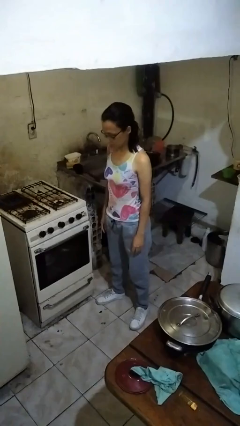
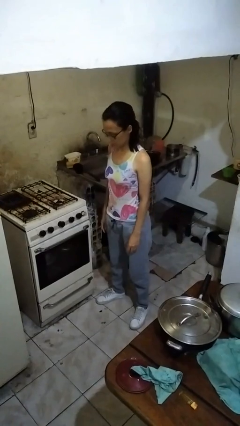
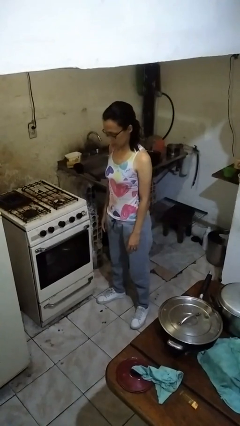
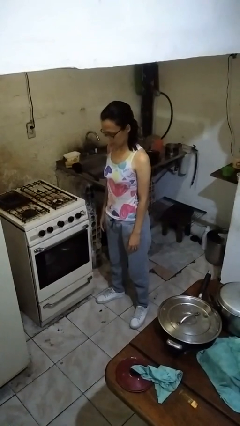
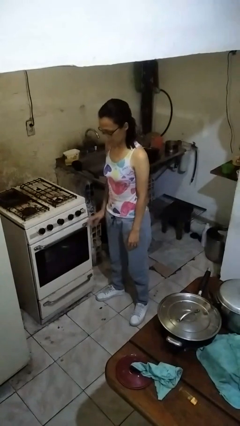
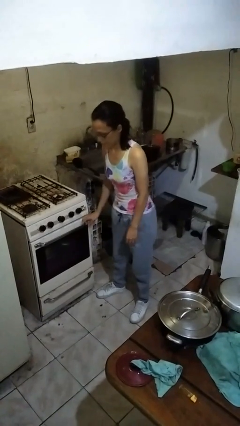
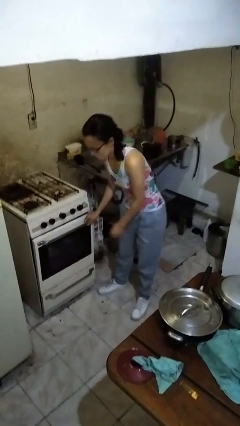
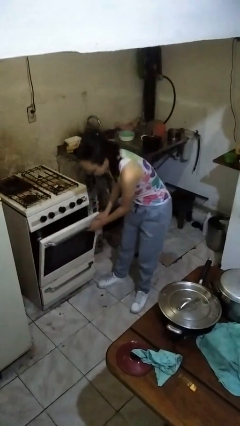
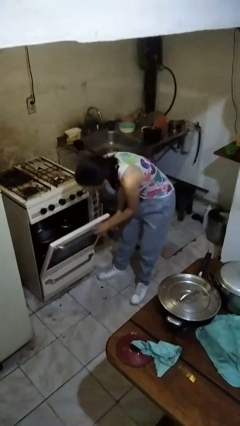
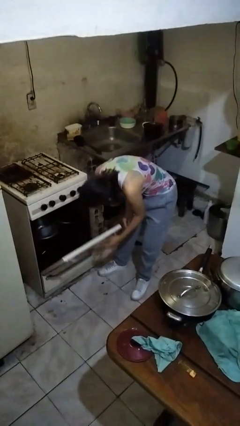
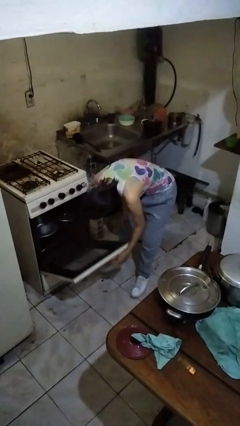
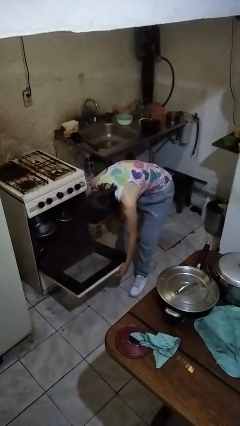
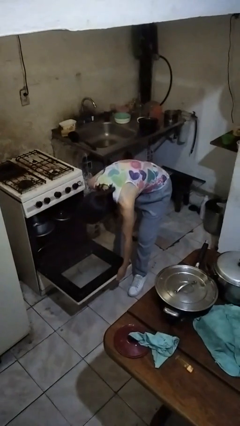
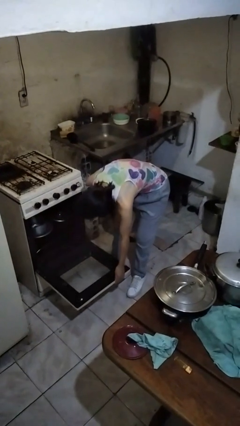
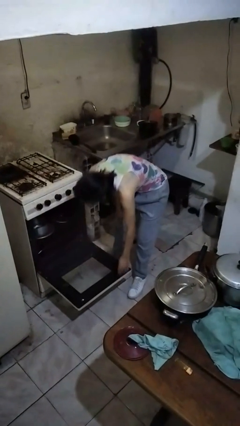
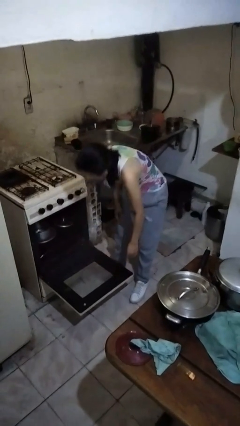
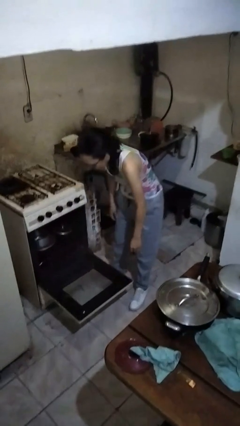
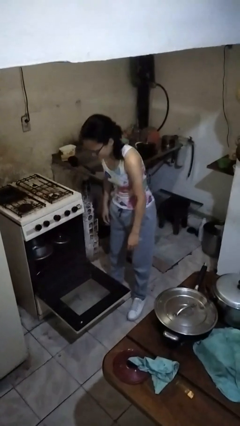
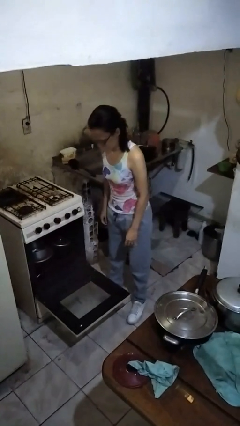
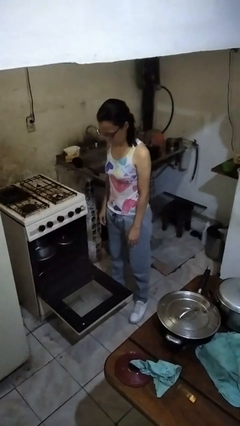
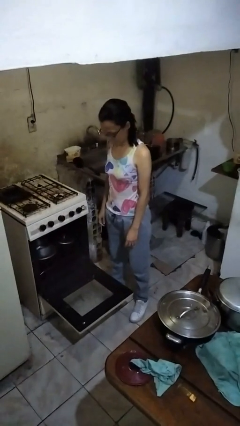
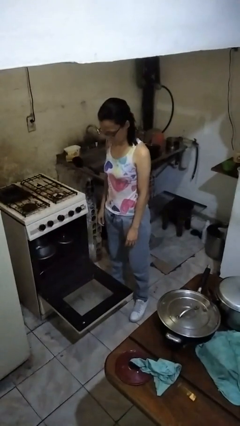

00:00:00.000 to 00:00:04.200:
person opens oven door

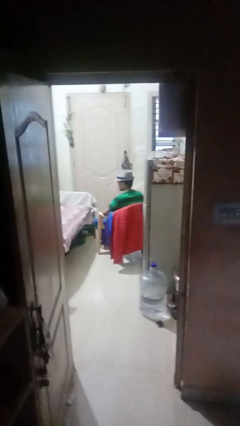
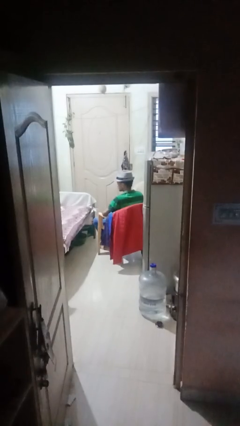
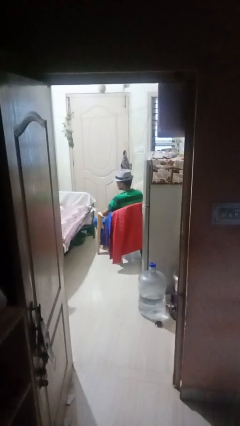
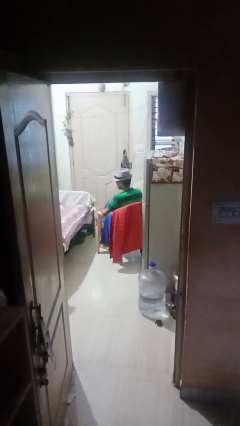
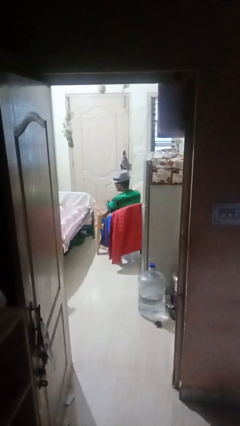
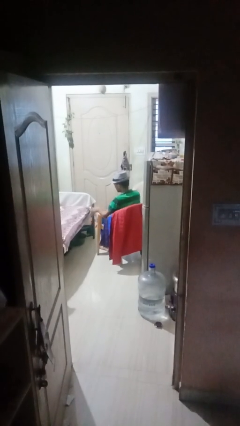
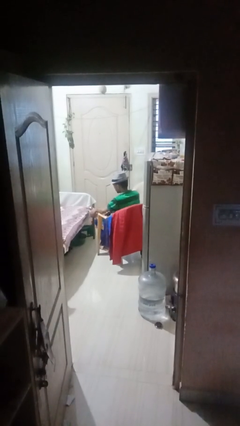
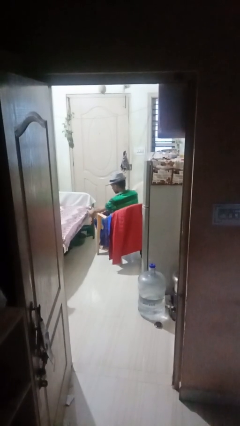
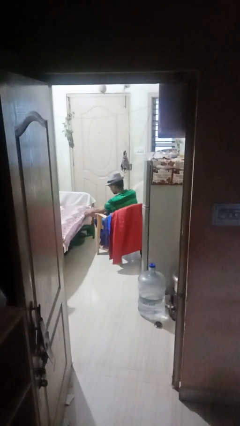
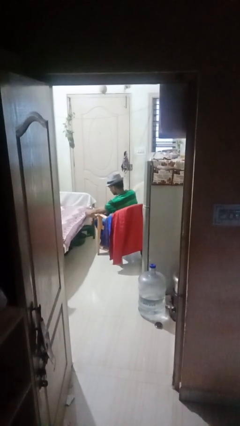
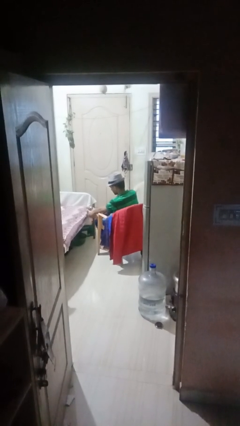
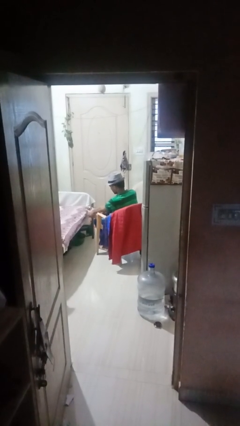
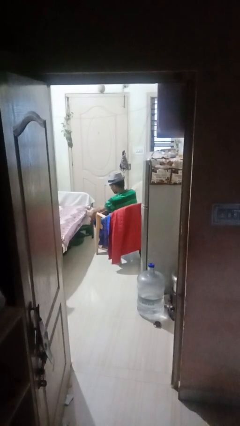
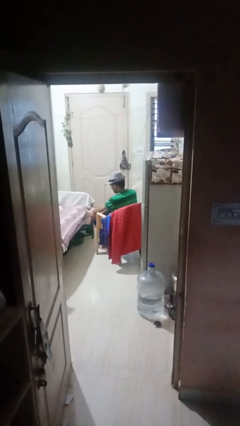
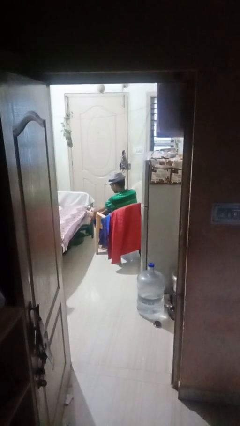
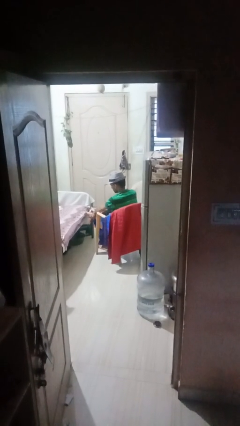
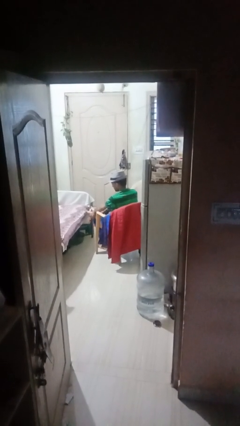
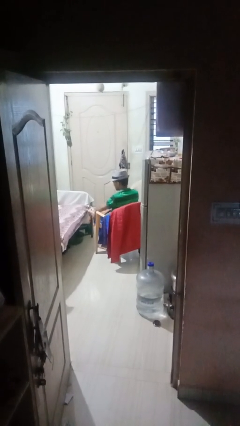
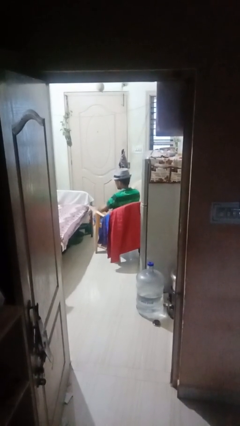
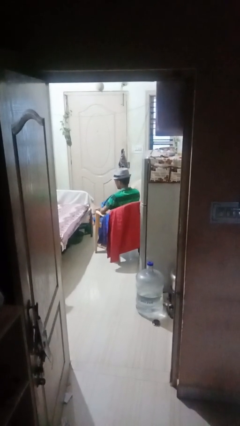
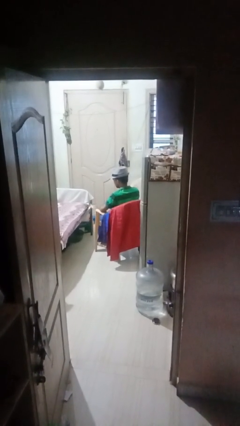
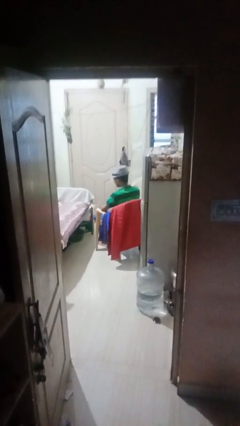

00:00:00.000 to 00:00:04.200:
person rubs foot

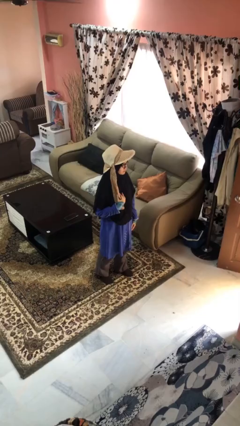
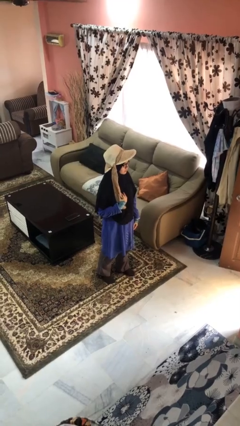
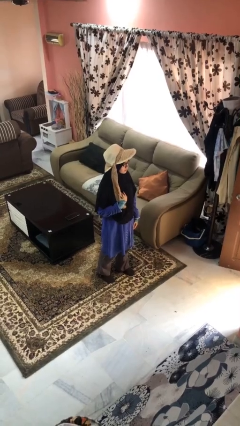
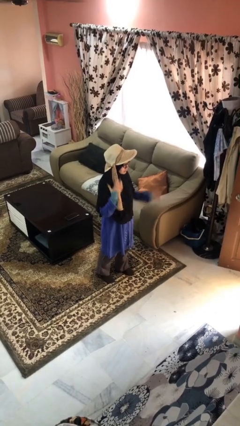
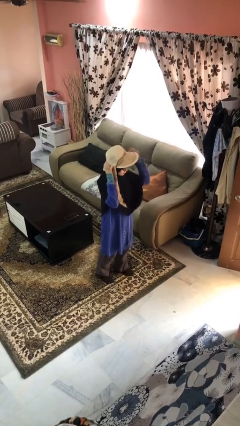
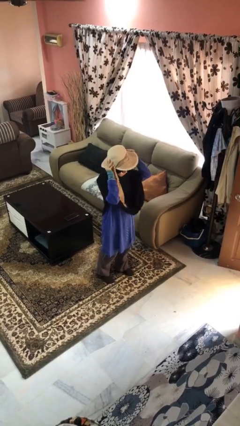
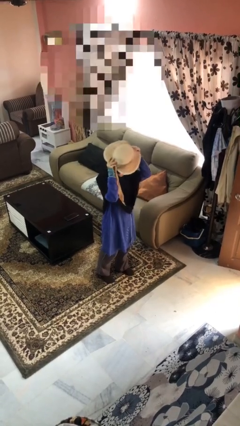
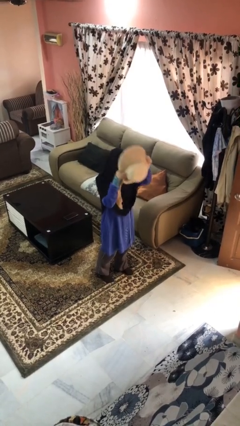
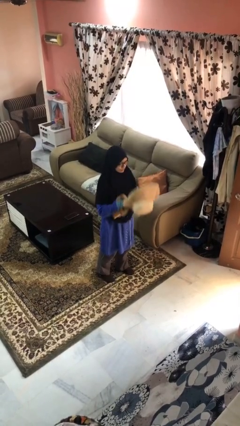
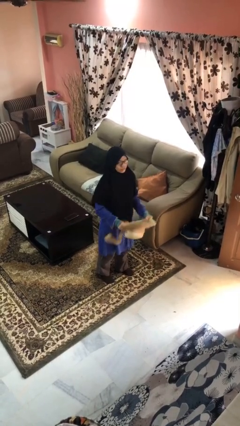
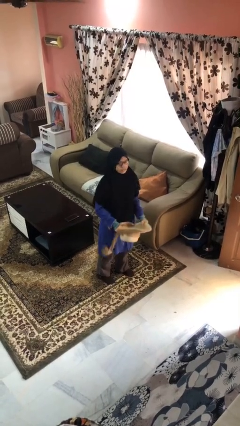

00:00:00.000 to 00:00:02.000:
person takes off hat

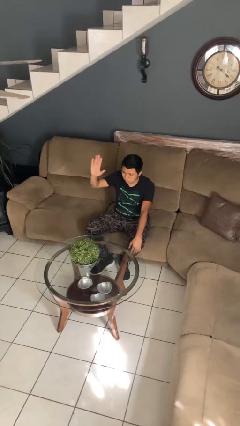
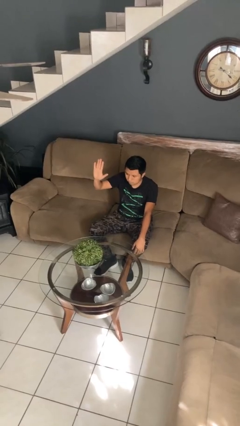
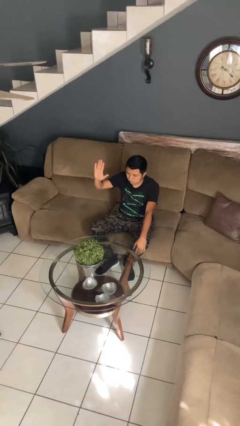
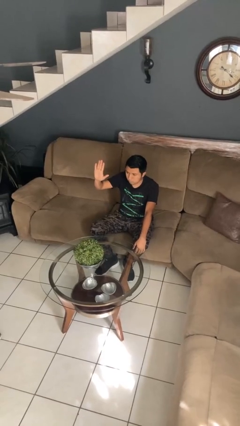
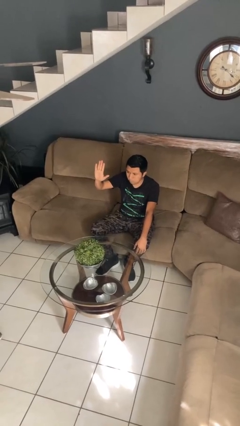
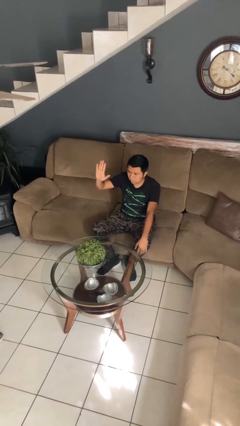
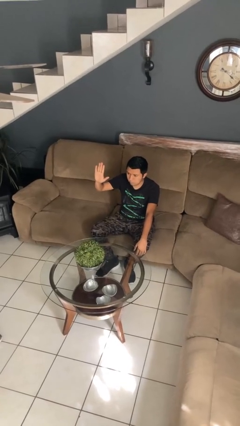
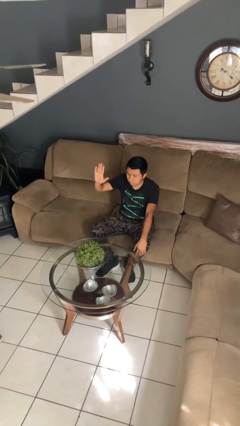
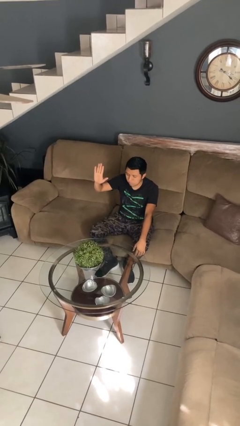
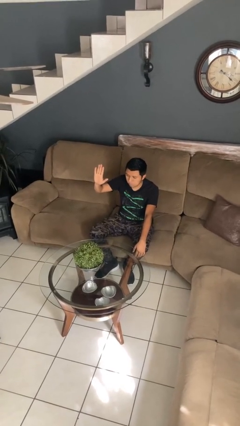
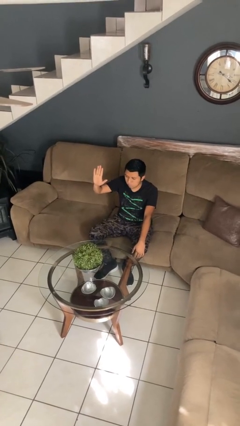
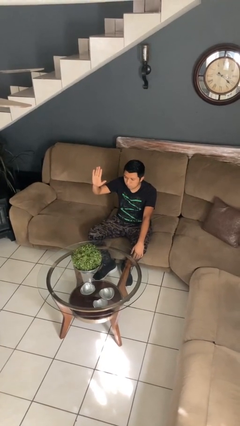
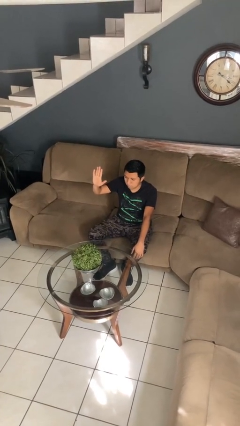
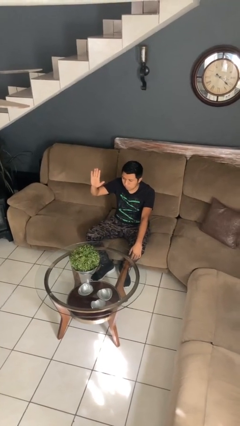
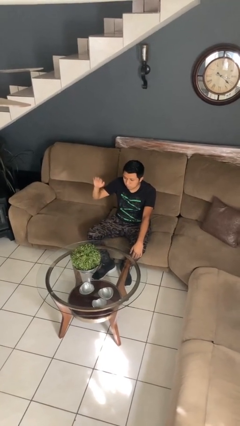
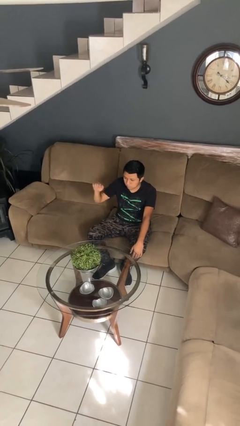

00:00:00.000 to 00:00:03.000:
person gestures stop

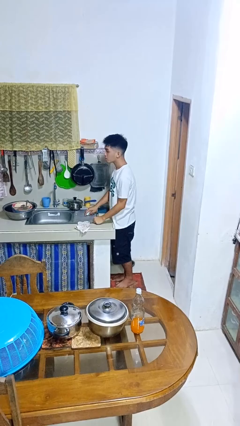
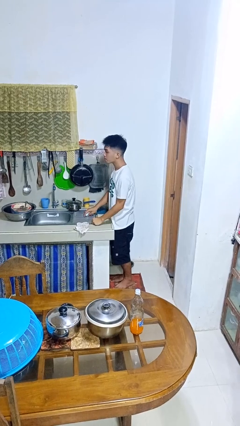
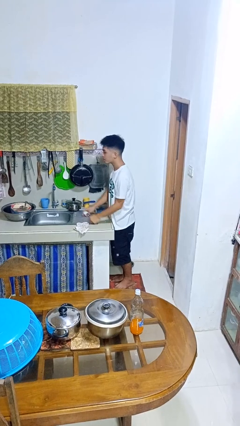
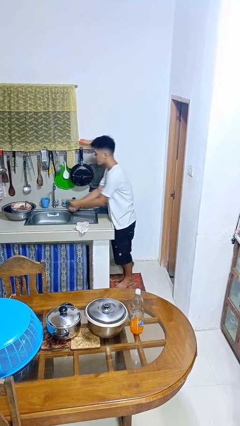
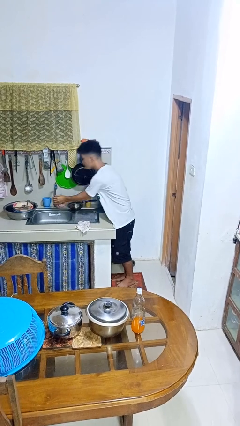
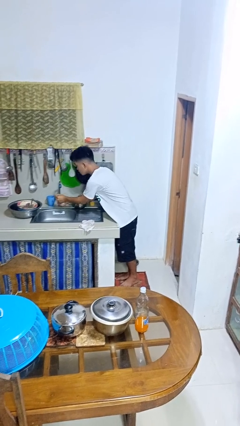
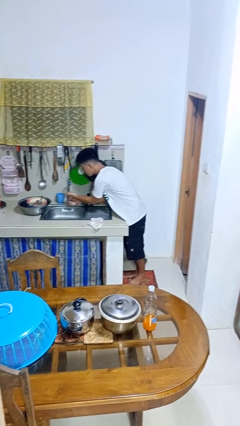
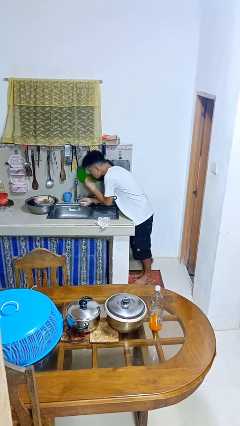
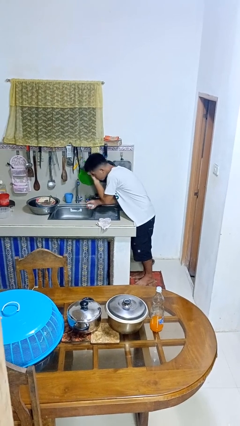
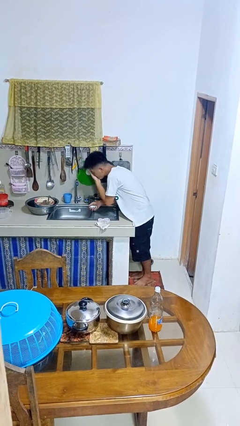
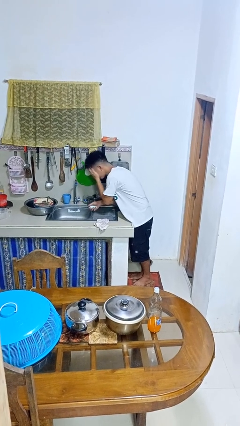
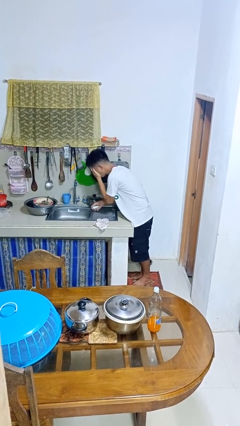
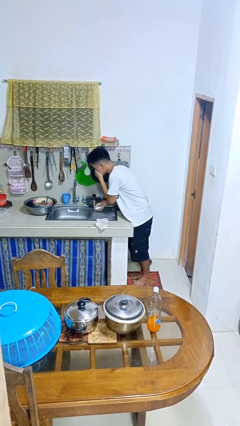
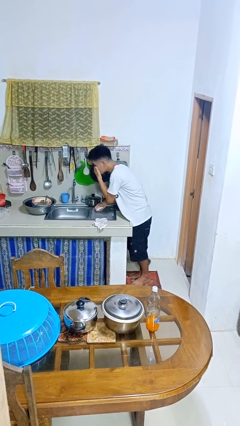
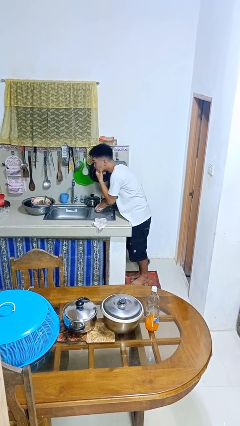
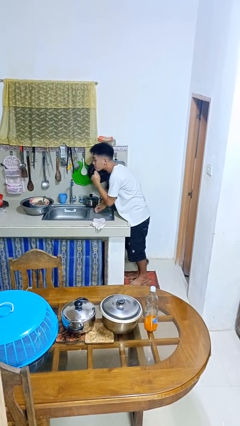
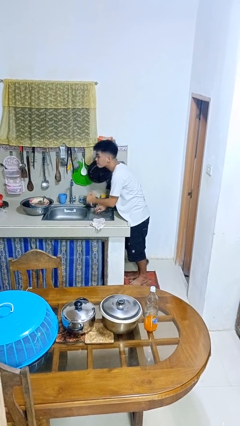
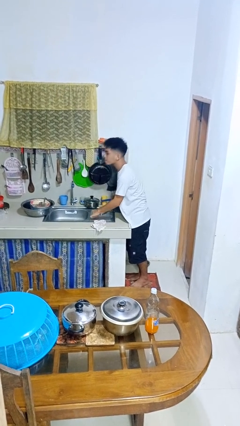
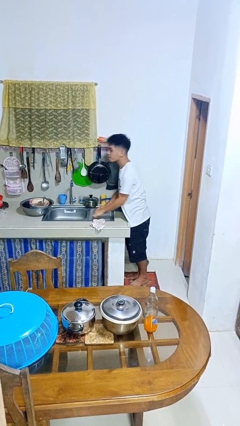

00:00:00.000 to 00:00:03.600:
person washes face

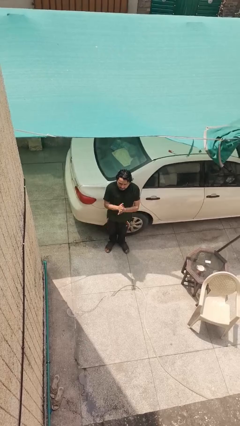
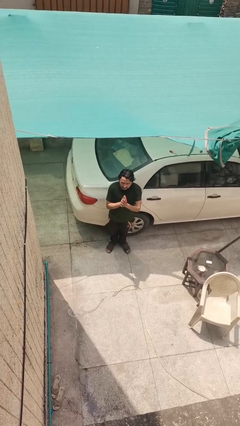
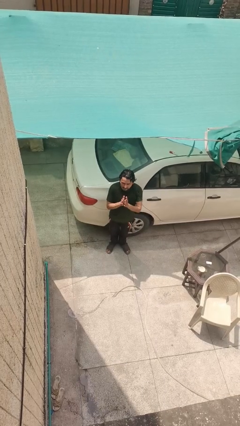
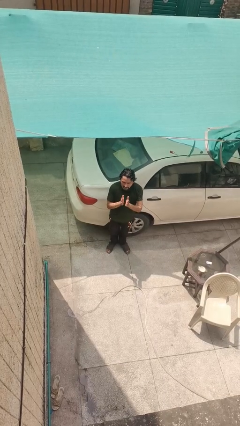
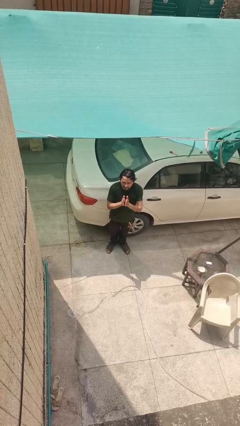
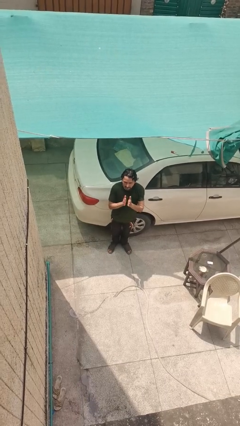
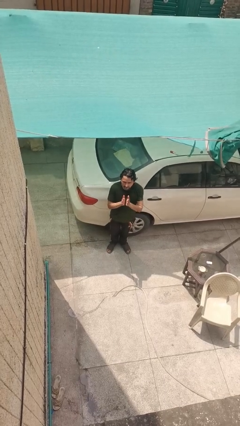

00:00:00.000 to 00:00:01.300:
person claps hands
